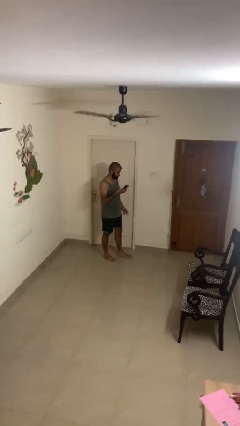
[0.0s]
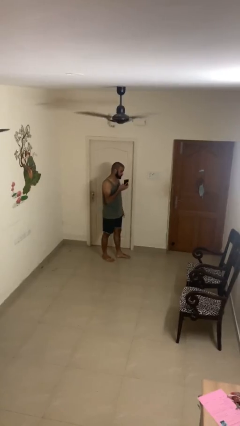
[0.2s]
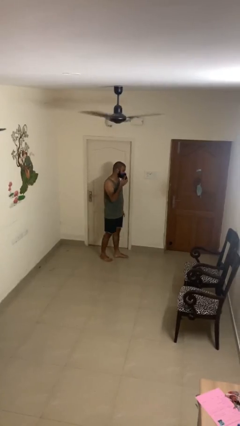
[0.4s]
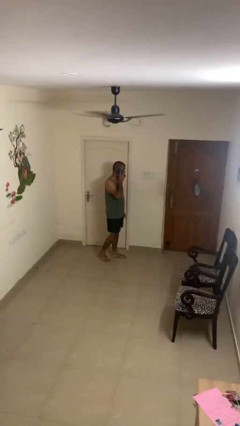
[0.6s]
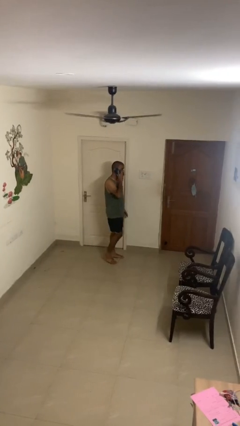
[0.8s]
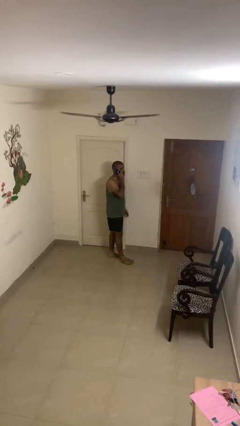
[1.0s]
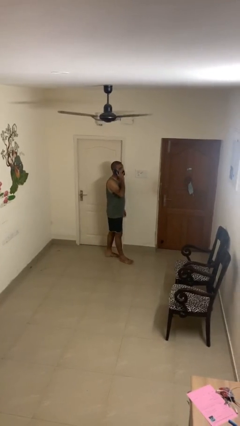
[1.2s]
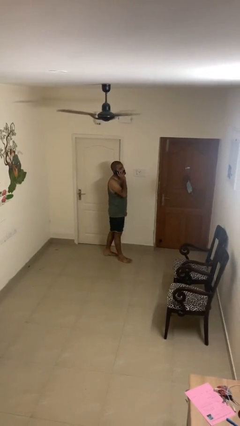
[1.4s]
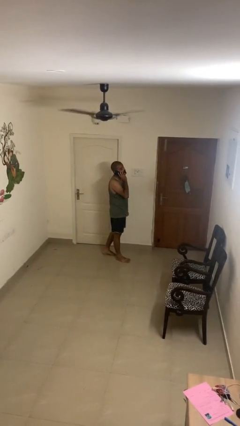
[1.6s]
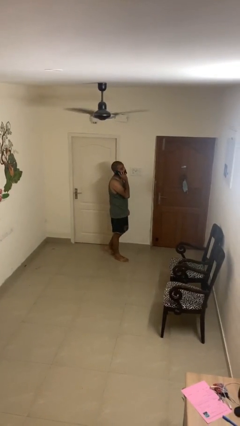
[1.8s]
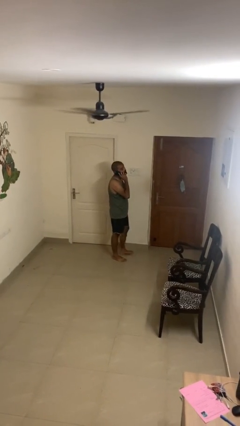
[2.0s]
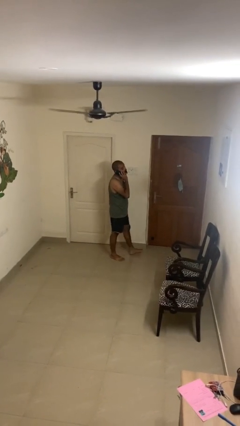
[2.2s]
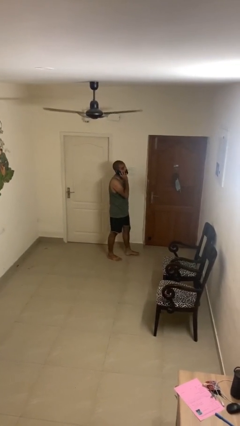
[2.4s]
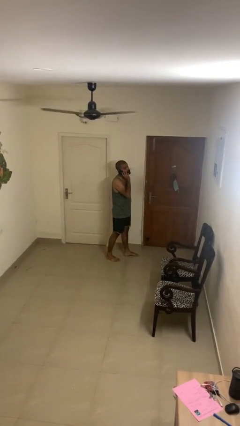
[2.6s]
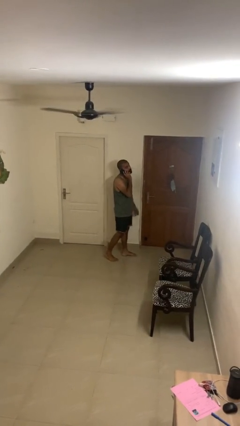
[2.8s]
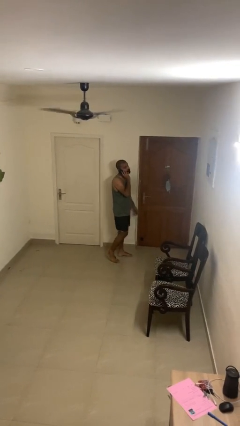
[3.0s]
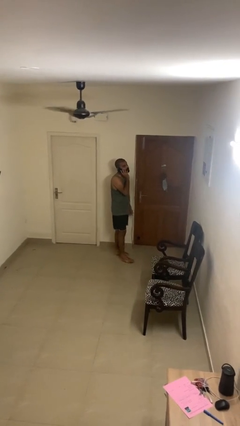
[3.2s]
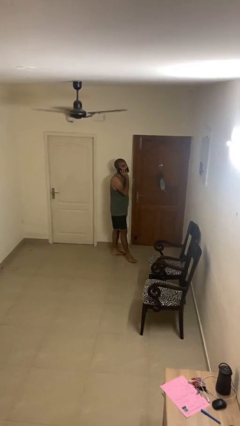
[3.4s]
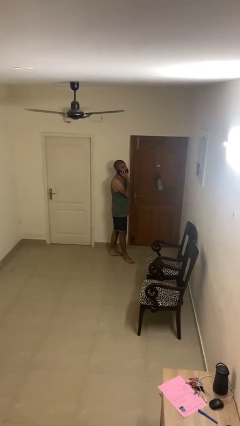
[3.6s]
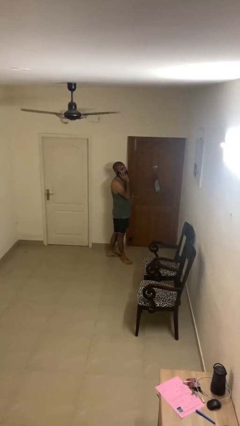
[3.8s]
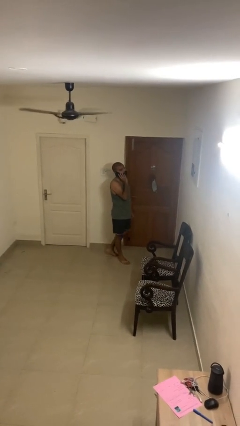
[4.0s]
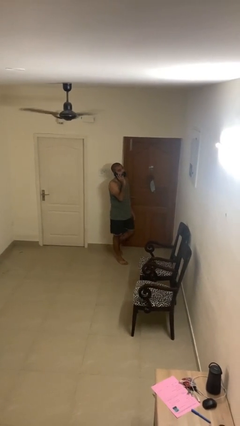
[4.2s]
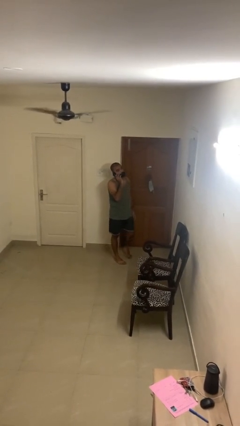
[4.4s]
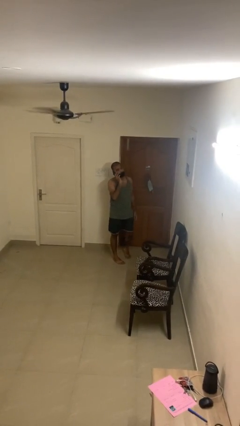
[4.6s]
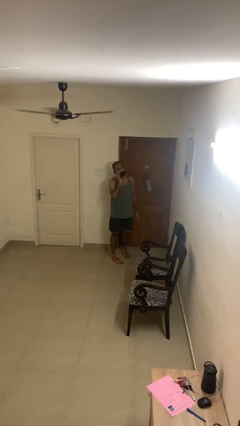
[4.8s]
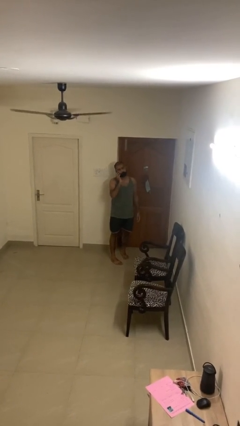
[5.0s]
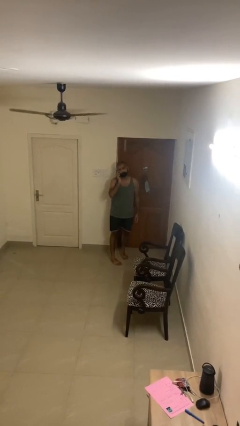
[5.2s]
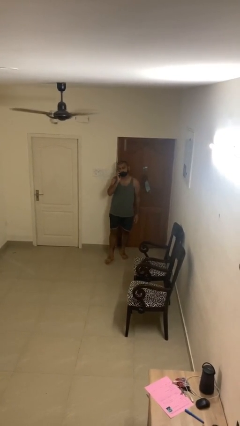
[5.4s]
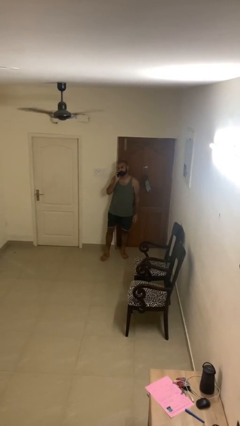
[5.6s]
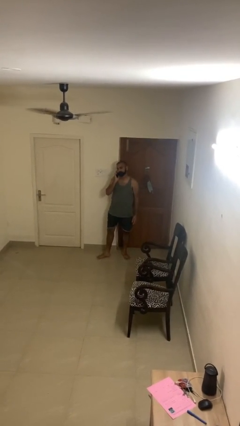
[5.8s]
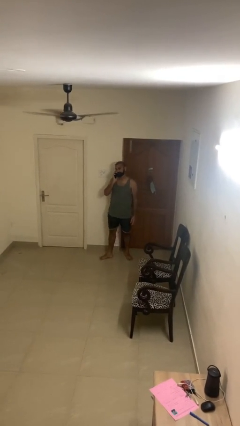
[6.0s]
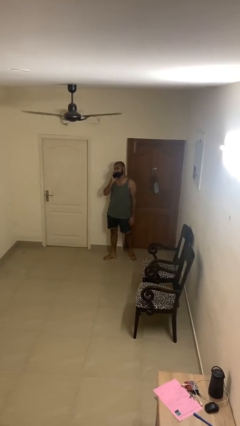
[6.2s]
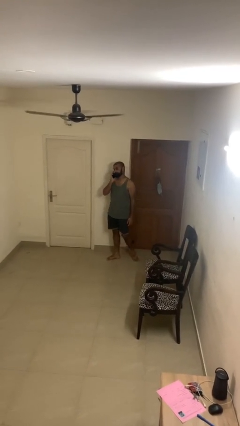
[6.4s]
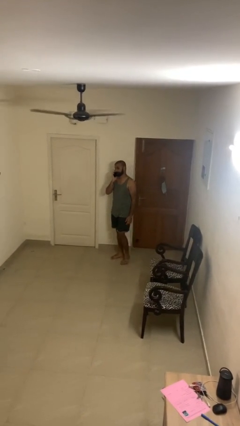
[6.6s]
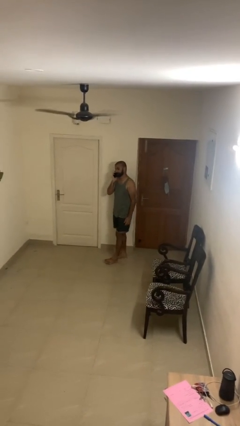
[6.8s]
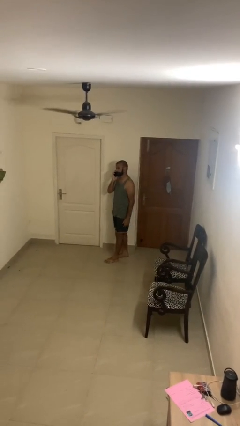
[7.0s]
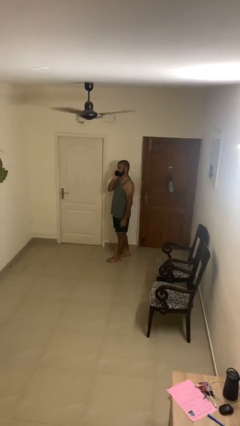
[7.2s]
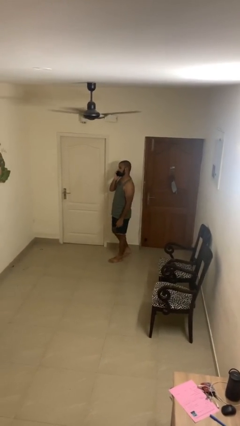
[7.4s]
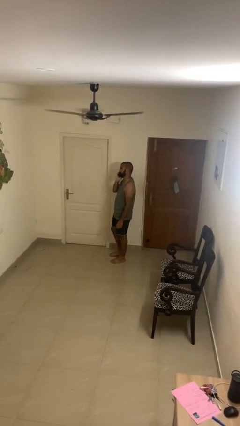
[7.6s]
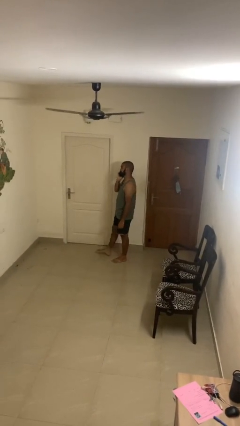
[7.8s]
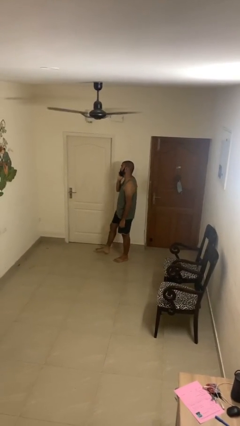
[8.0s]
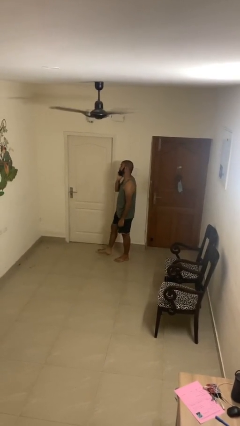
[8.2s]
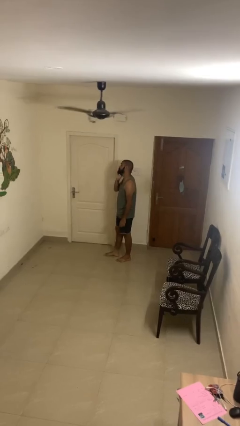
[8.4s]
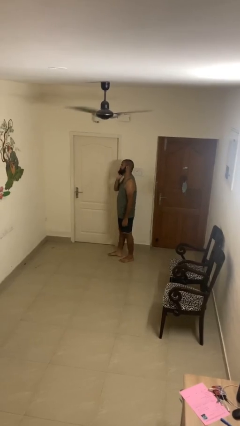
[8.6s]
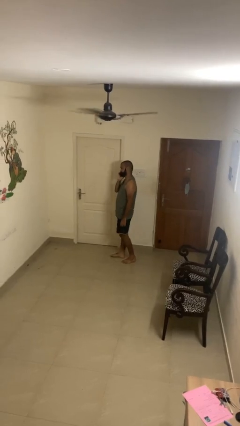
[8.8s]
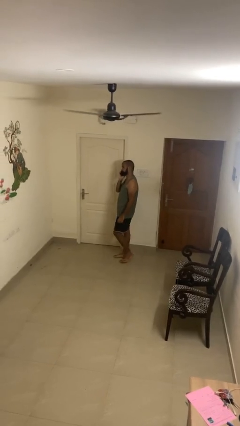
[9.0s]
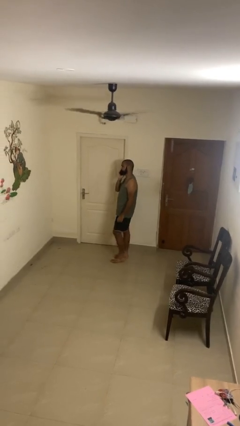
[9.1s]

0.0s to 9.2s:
person talks on phone

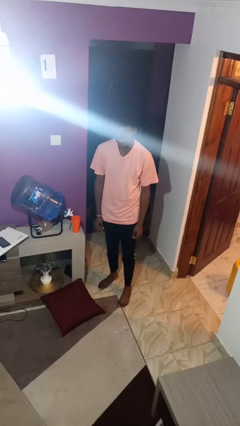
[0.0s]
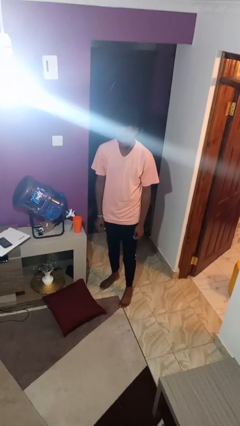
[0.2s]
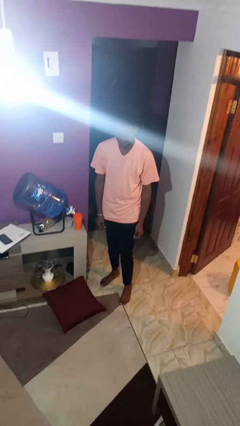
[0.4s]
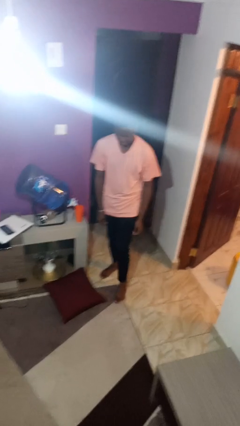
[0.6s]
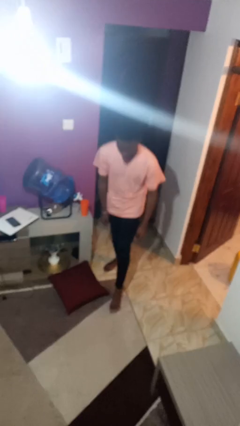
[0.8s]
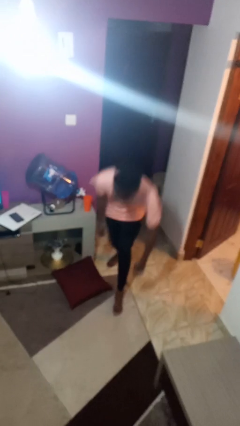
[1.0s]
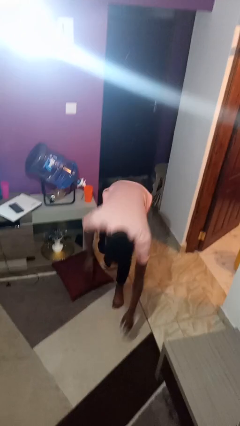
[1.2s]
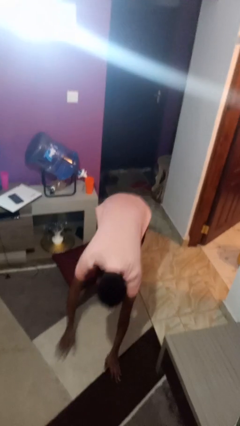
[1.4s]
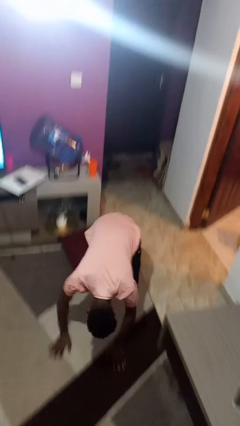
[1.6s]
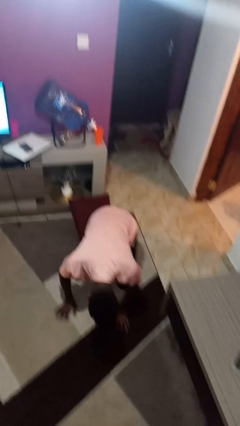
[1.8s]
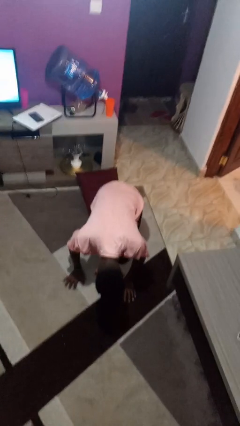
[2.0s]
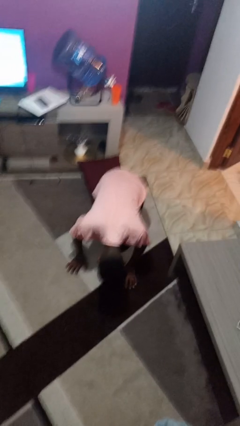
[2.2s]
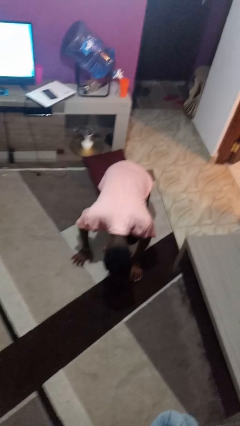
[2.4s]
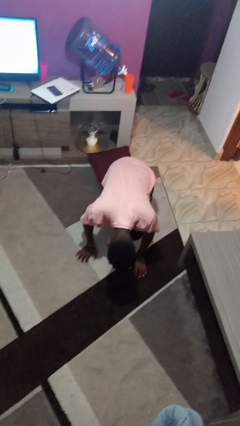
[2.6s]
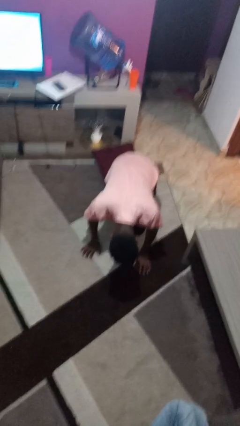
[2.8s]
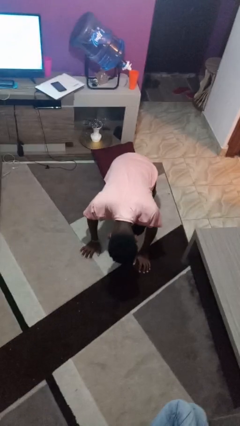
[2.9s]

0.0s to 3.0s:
person trips on object on floor

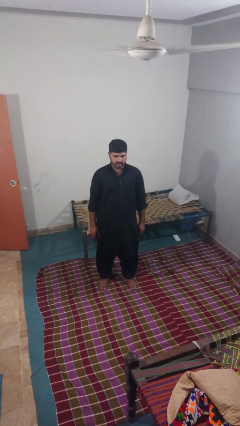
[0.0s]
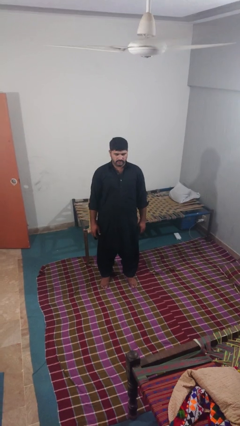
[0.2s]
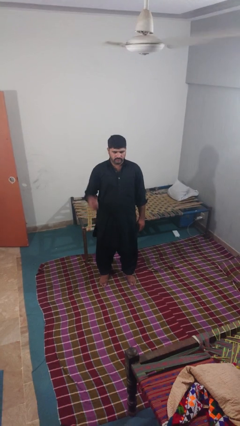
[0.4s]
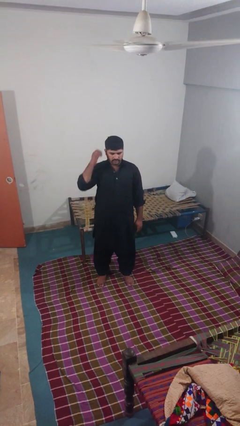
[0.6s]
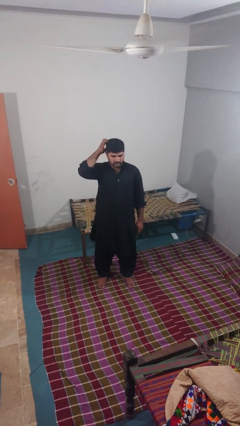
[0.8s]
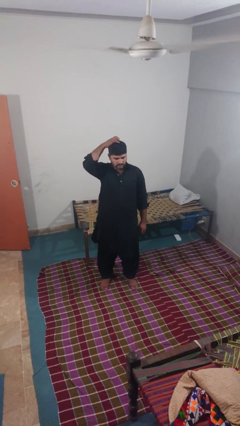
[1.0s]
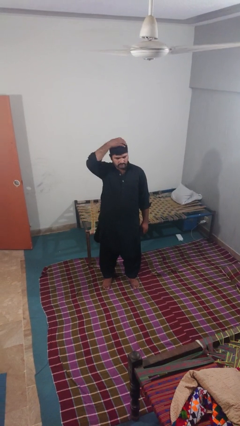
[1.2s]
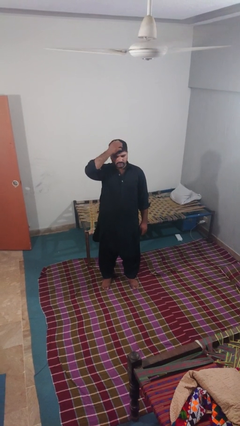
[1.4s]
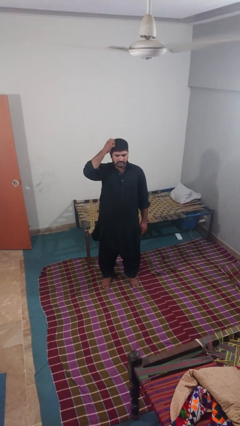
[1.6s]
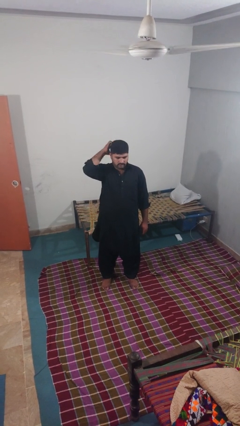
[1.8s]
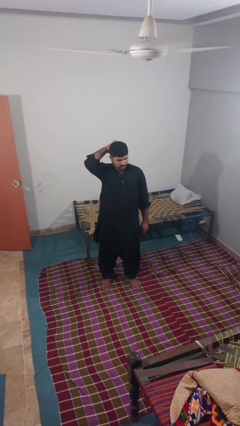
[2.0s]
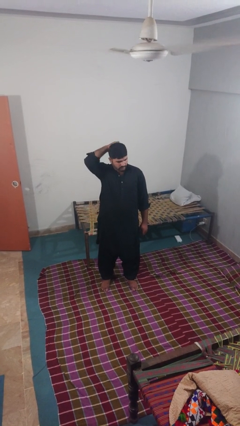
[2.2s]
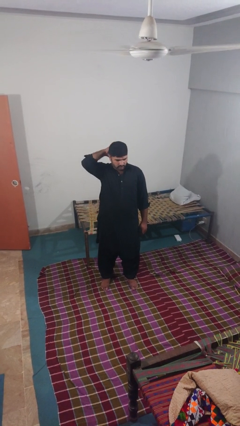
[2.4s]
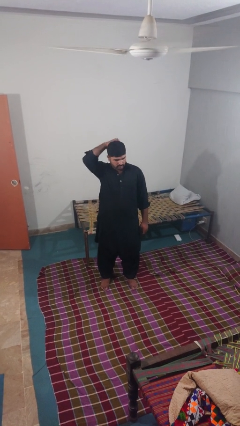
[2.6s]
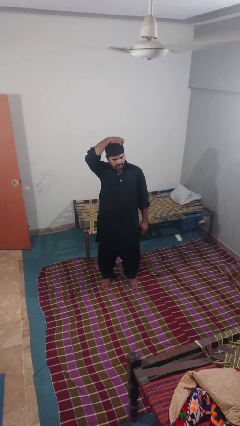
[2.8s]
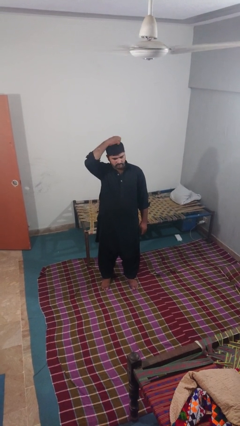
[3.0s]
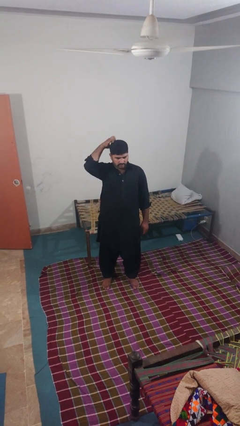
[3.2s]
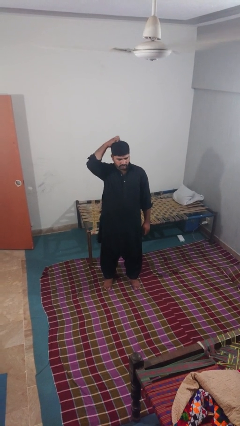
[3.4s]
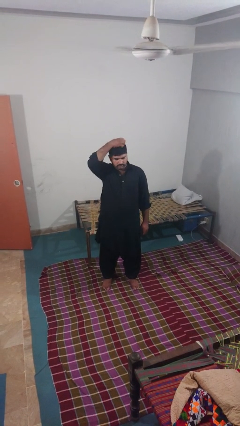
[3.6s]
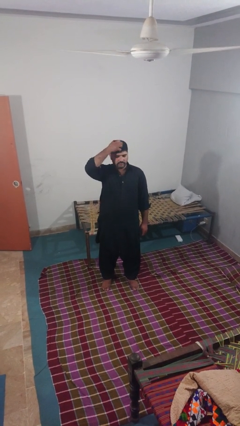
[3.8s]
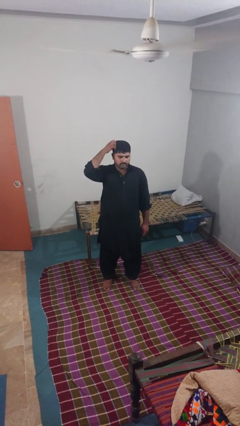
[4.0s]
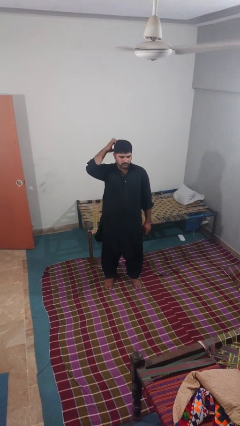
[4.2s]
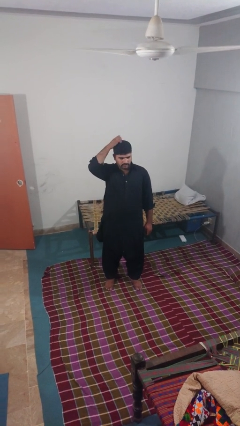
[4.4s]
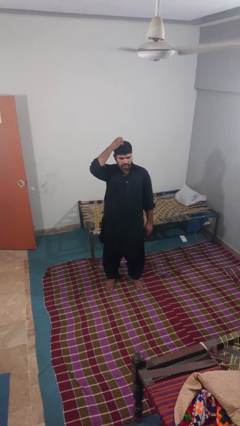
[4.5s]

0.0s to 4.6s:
person scratches face

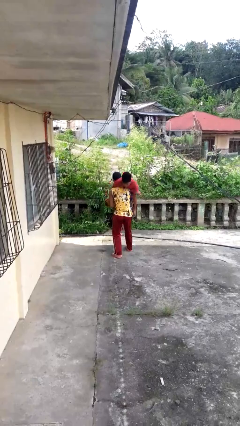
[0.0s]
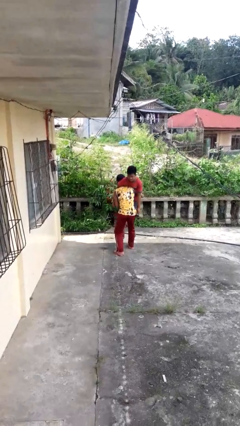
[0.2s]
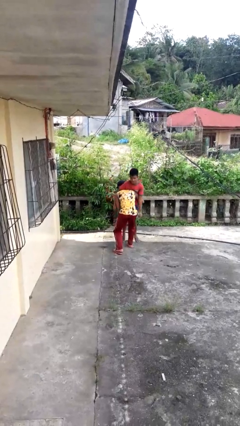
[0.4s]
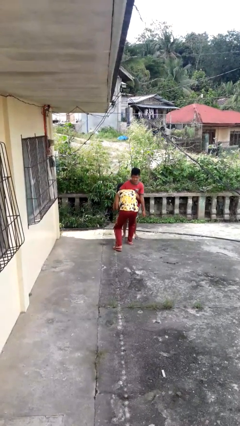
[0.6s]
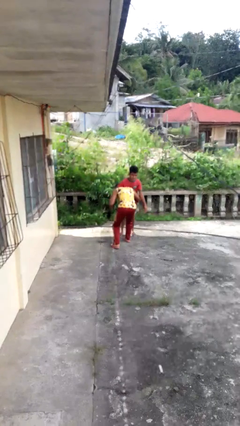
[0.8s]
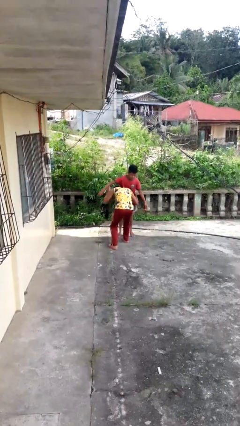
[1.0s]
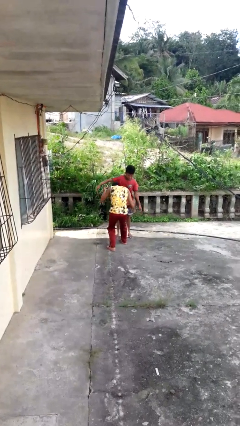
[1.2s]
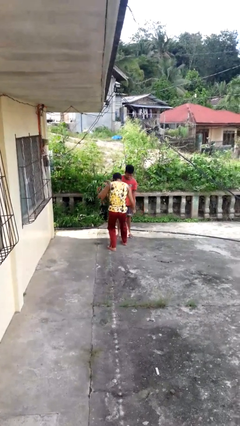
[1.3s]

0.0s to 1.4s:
person puts down person
